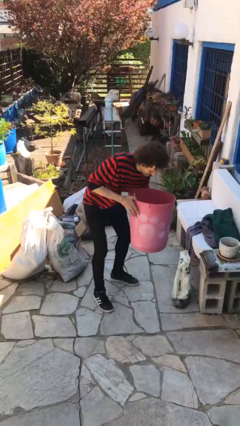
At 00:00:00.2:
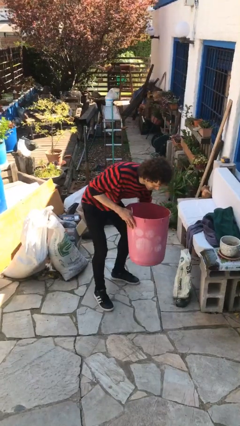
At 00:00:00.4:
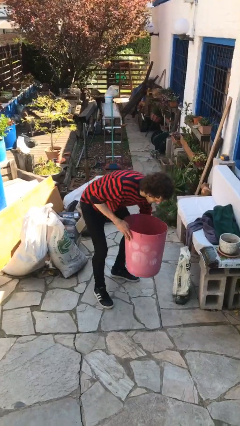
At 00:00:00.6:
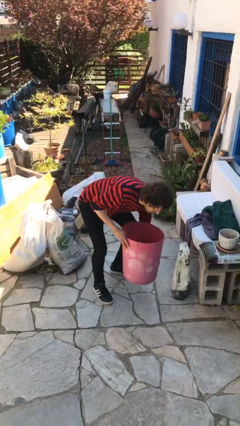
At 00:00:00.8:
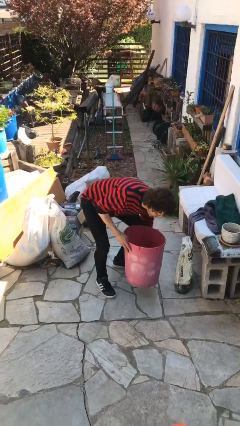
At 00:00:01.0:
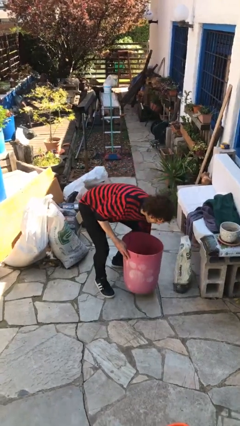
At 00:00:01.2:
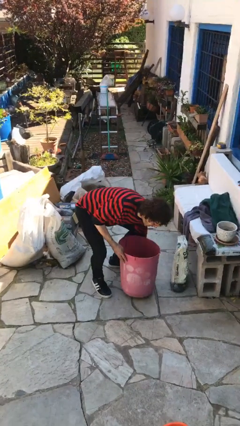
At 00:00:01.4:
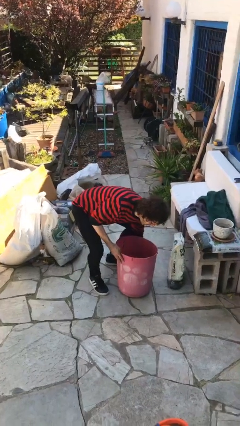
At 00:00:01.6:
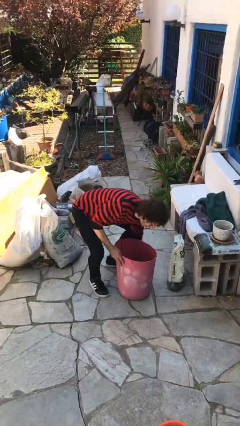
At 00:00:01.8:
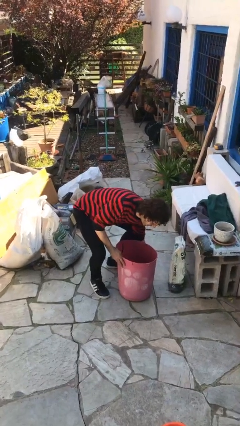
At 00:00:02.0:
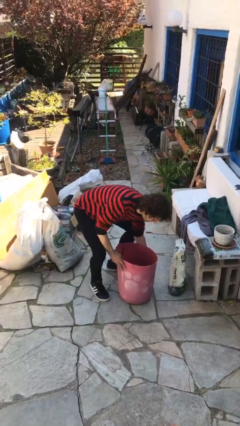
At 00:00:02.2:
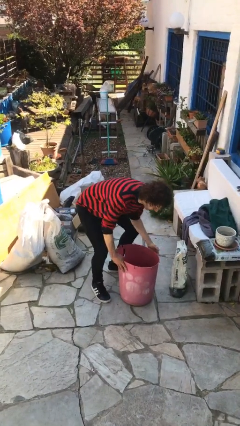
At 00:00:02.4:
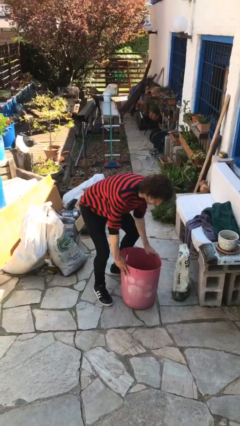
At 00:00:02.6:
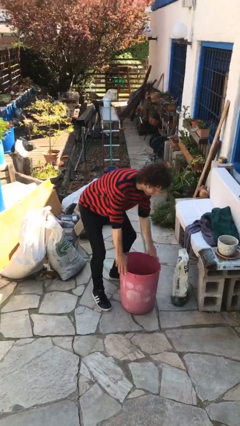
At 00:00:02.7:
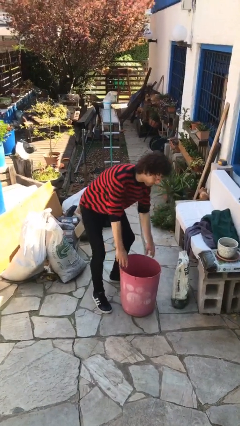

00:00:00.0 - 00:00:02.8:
person puts down object on floor

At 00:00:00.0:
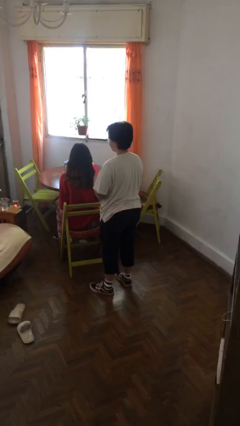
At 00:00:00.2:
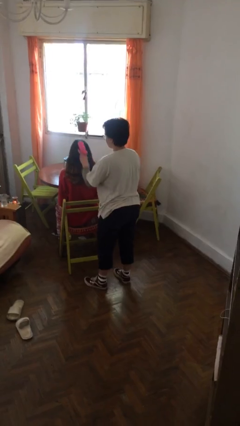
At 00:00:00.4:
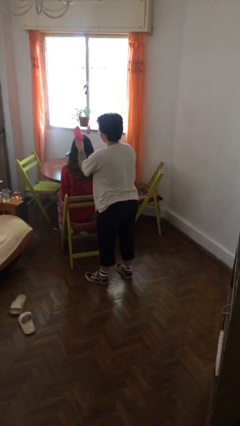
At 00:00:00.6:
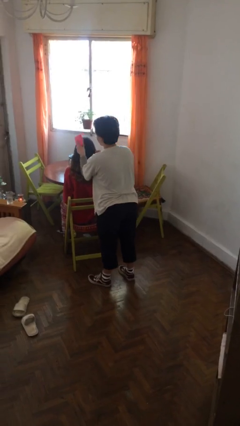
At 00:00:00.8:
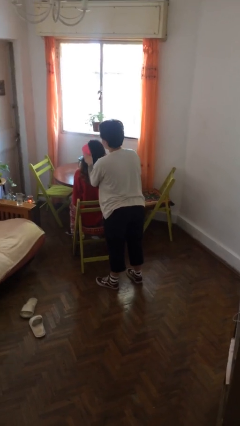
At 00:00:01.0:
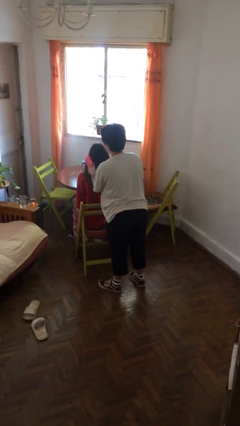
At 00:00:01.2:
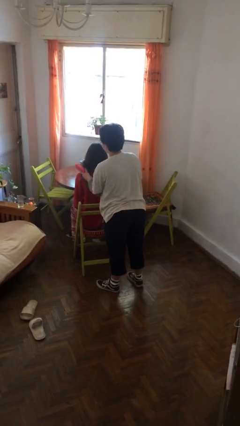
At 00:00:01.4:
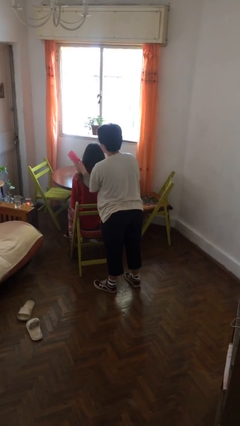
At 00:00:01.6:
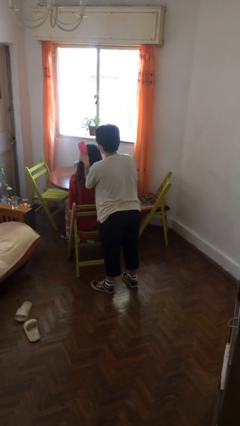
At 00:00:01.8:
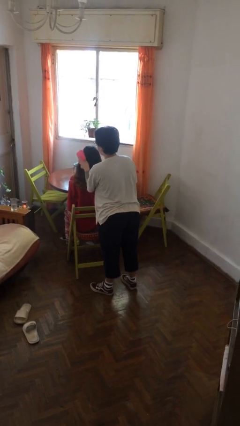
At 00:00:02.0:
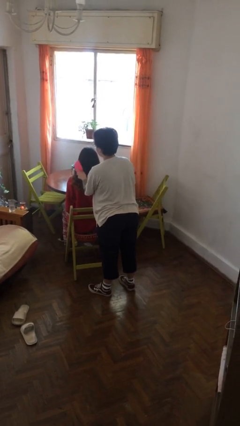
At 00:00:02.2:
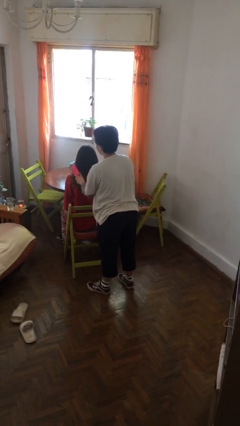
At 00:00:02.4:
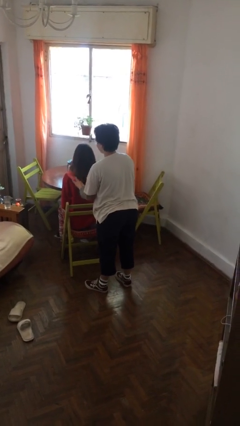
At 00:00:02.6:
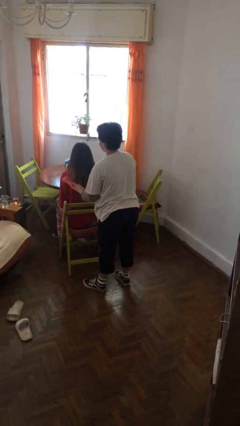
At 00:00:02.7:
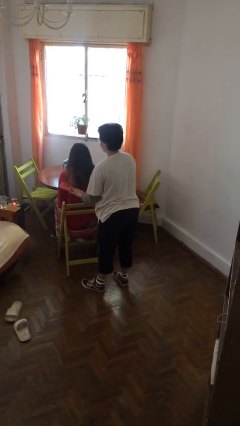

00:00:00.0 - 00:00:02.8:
person brushes hair of person

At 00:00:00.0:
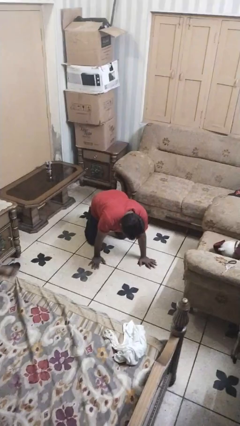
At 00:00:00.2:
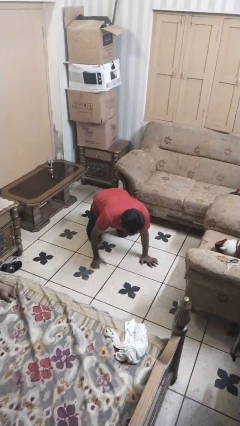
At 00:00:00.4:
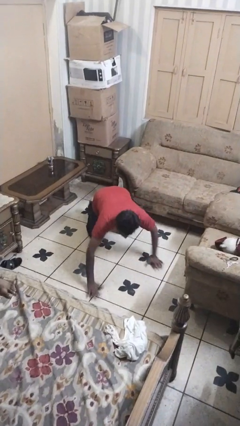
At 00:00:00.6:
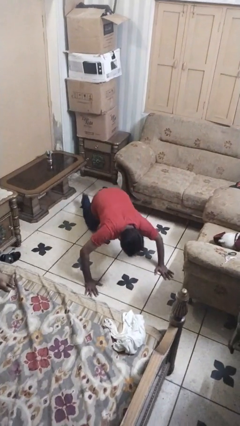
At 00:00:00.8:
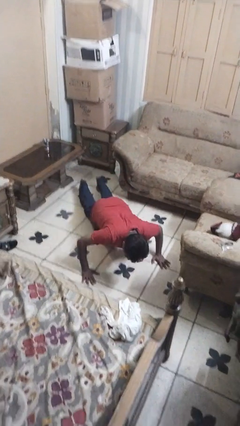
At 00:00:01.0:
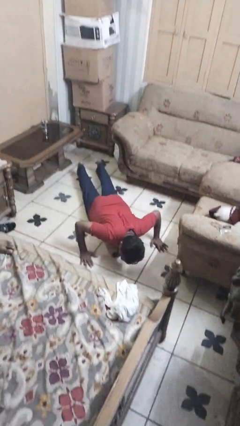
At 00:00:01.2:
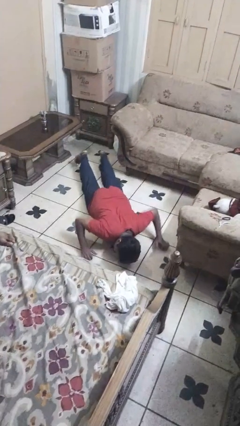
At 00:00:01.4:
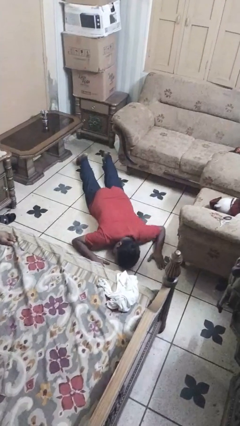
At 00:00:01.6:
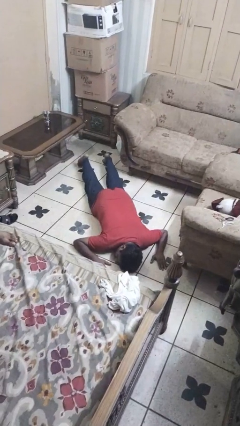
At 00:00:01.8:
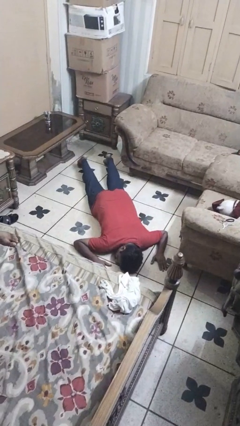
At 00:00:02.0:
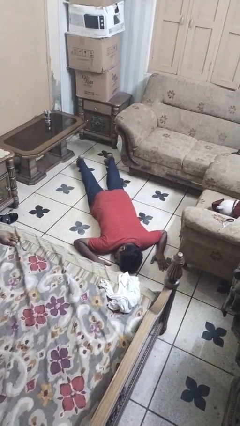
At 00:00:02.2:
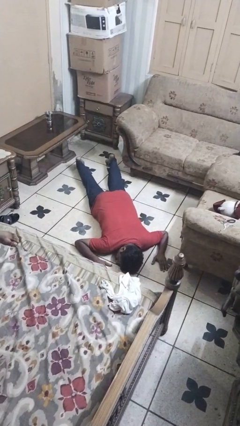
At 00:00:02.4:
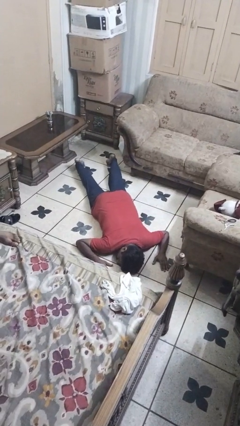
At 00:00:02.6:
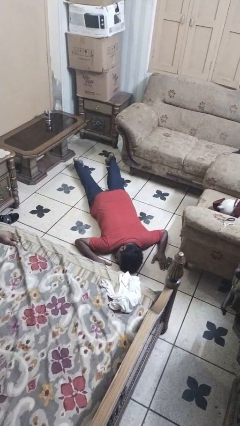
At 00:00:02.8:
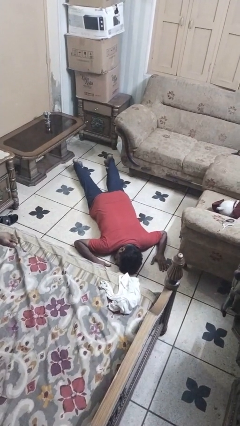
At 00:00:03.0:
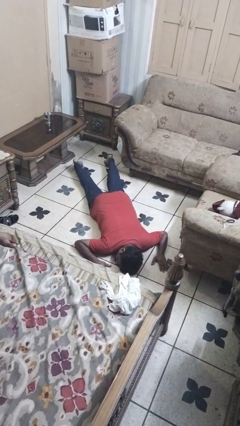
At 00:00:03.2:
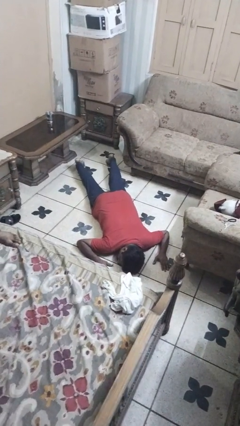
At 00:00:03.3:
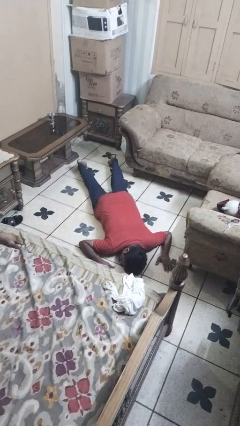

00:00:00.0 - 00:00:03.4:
person lies down on floor

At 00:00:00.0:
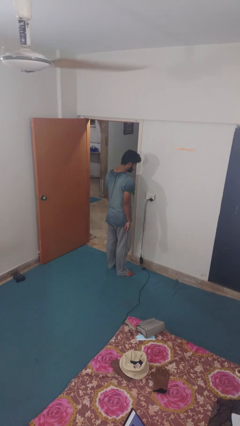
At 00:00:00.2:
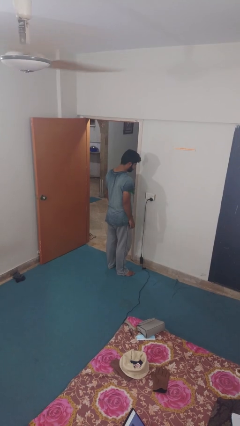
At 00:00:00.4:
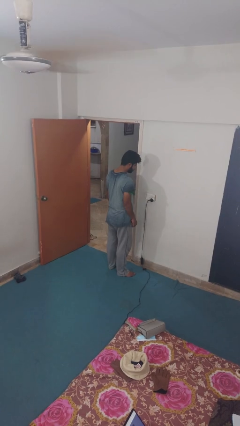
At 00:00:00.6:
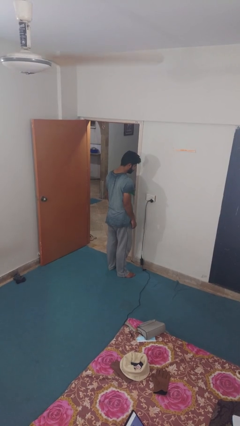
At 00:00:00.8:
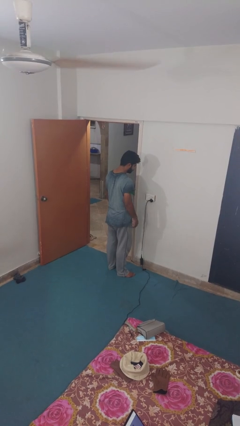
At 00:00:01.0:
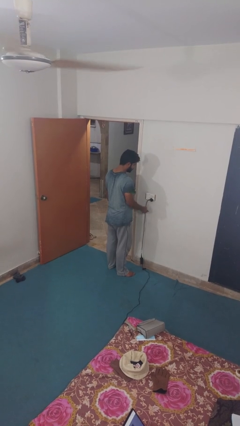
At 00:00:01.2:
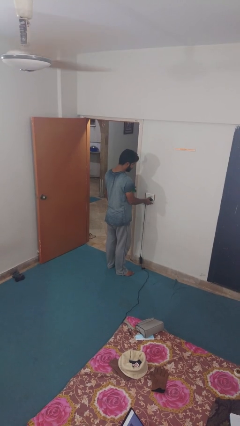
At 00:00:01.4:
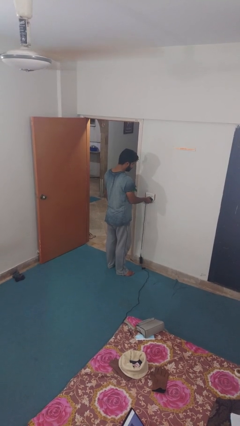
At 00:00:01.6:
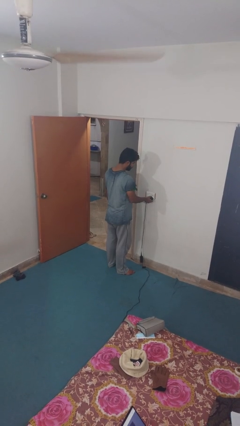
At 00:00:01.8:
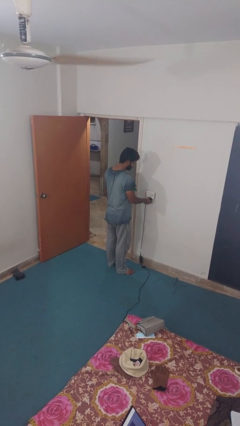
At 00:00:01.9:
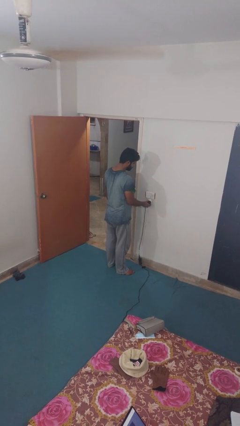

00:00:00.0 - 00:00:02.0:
person unplugs from electrical socket

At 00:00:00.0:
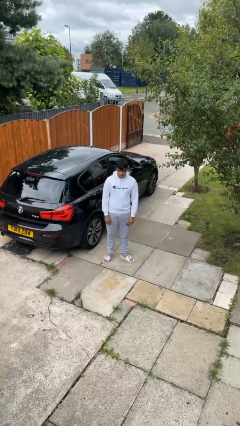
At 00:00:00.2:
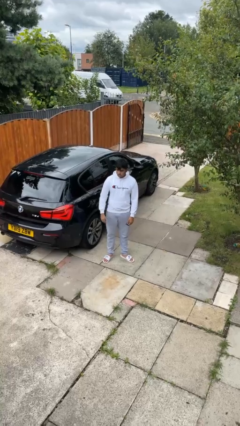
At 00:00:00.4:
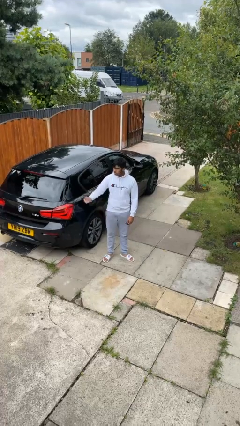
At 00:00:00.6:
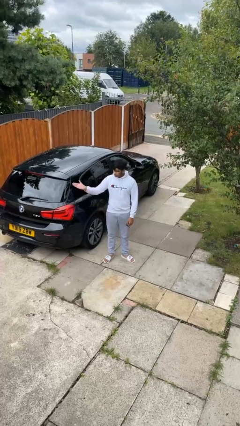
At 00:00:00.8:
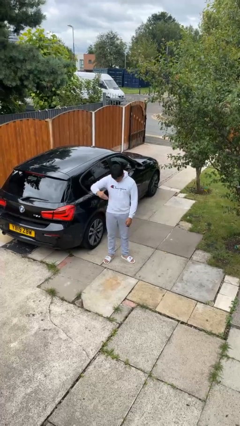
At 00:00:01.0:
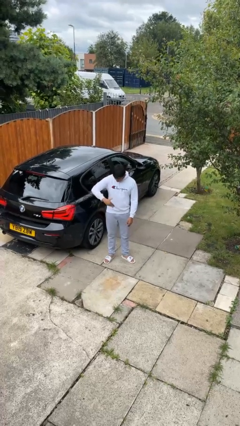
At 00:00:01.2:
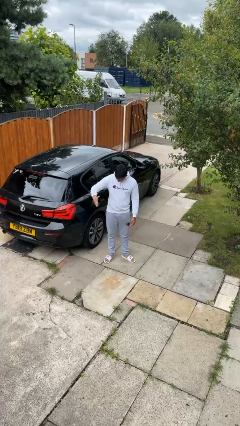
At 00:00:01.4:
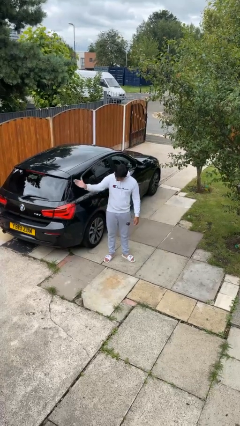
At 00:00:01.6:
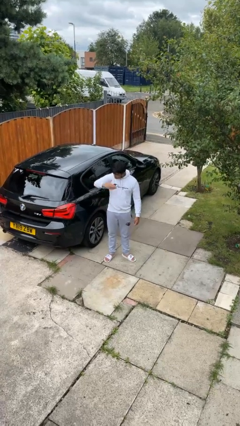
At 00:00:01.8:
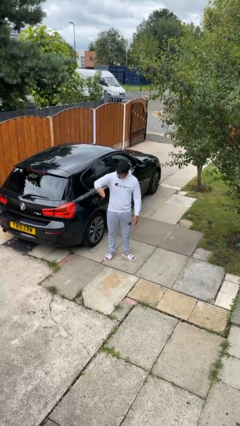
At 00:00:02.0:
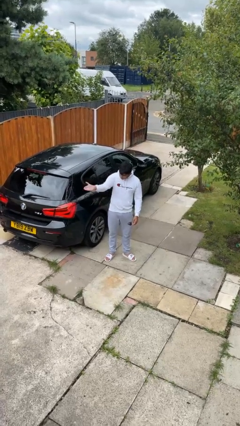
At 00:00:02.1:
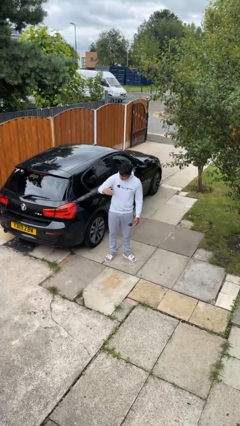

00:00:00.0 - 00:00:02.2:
person gestures come here

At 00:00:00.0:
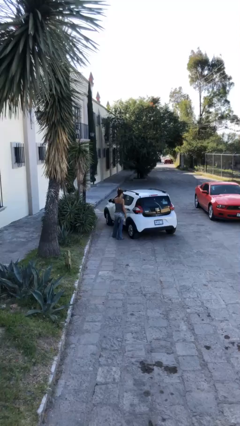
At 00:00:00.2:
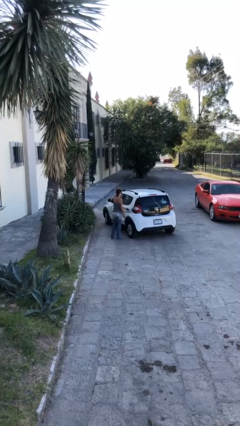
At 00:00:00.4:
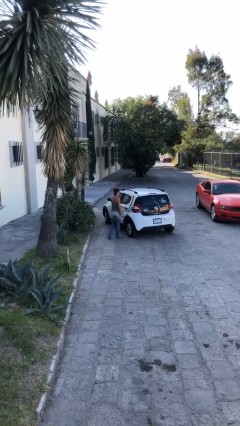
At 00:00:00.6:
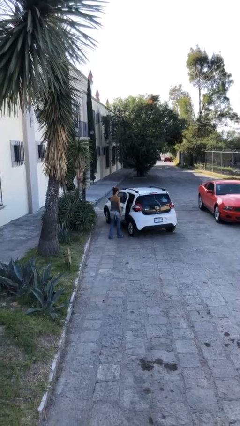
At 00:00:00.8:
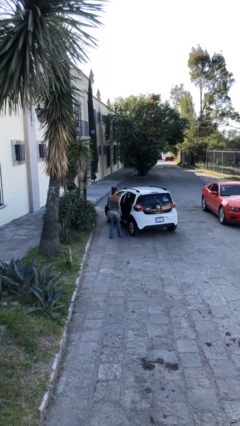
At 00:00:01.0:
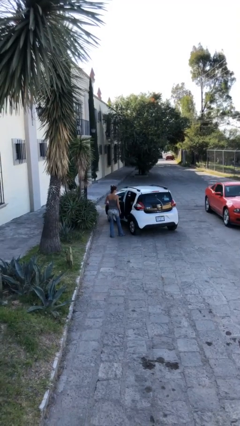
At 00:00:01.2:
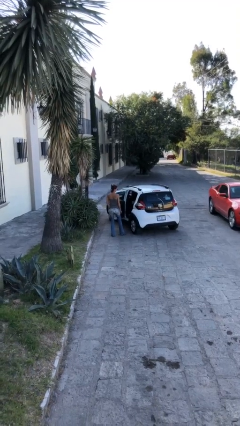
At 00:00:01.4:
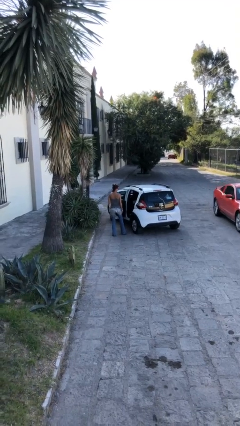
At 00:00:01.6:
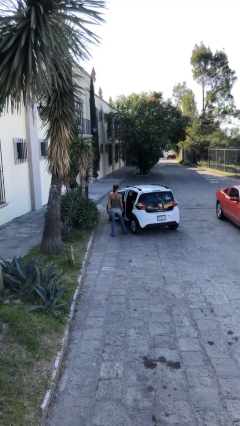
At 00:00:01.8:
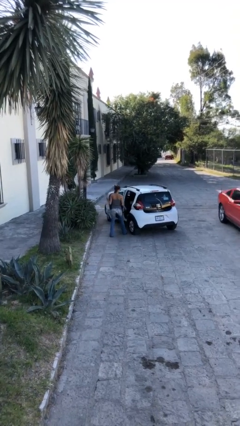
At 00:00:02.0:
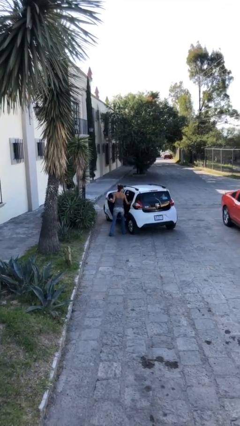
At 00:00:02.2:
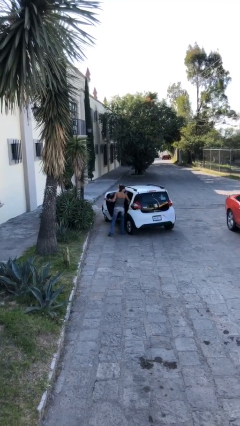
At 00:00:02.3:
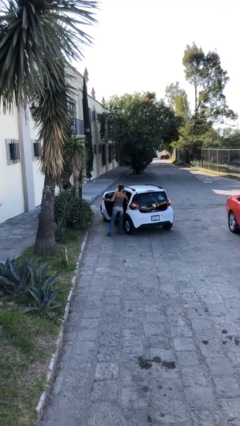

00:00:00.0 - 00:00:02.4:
person opens car door

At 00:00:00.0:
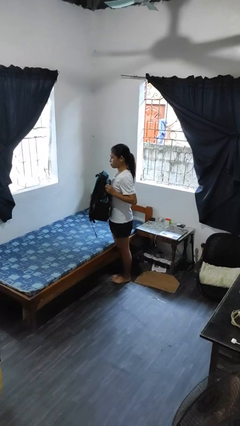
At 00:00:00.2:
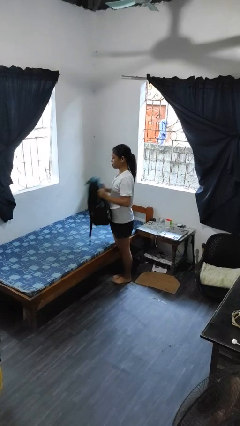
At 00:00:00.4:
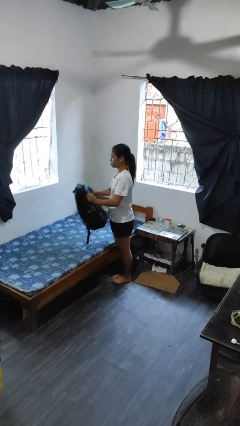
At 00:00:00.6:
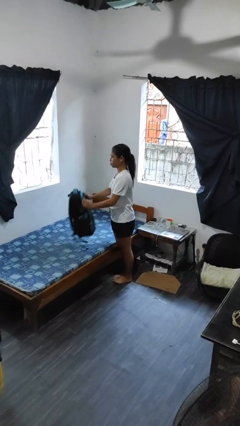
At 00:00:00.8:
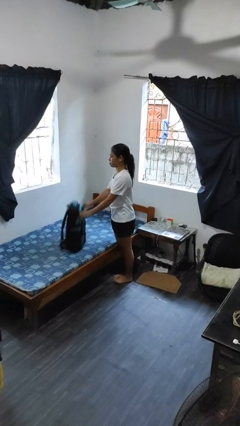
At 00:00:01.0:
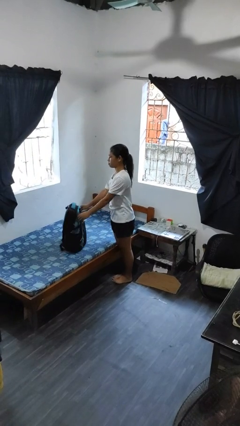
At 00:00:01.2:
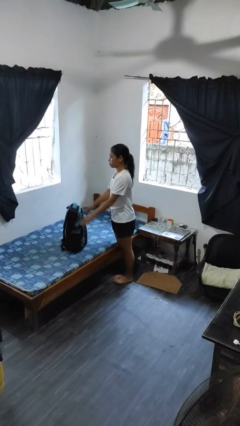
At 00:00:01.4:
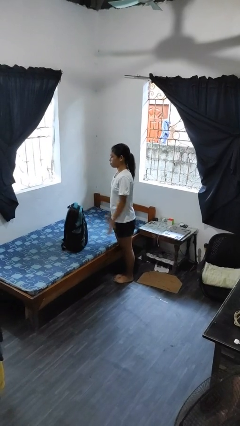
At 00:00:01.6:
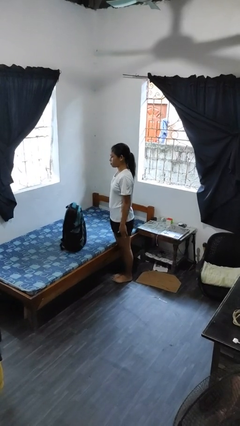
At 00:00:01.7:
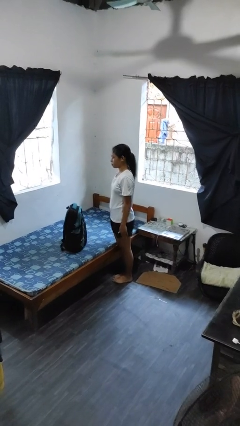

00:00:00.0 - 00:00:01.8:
person puts down object on bed
